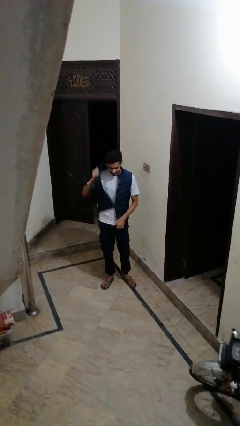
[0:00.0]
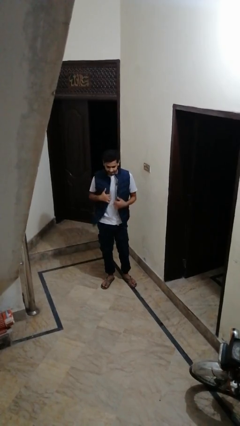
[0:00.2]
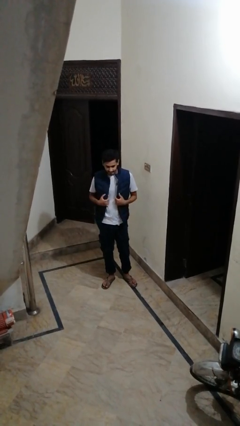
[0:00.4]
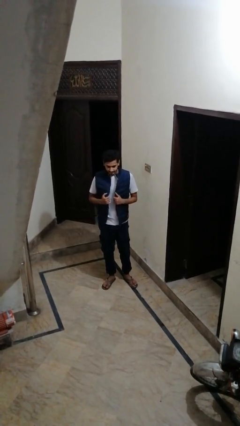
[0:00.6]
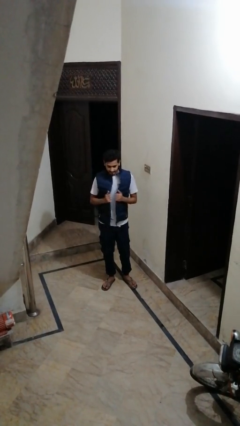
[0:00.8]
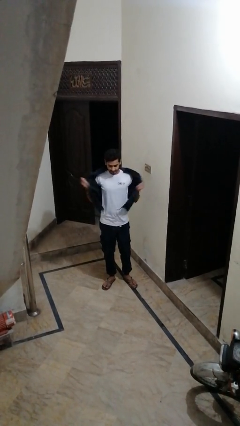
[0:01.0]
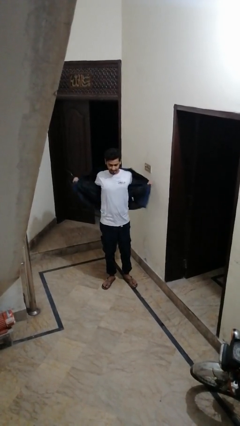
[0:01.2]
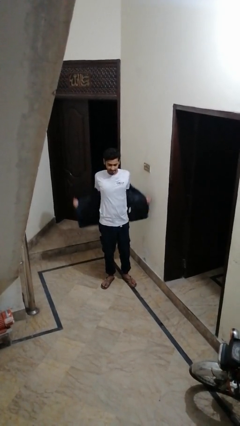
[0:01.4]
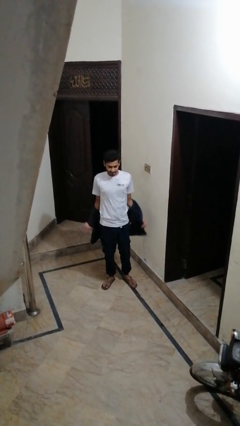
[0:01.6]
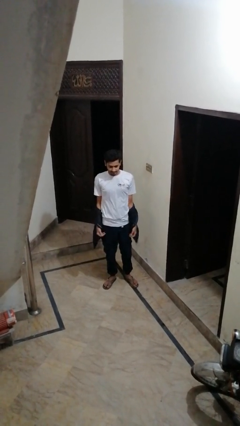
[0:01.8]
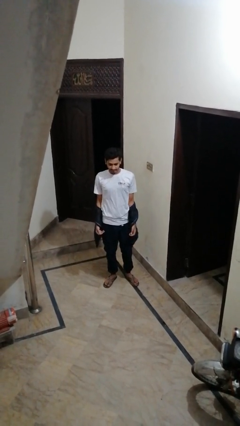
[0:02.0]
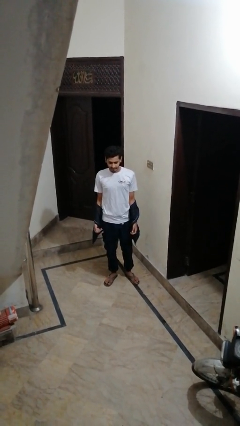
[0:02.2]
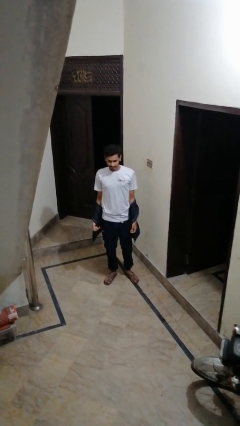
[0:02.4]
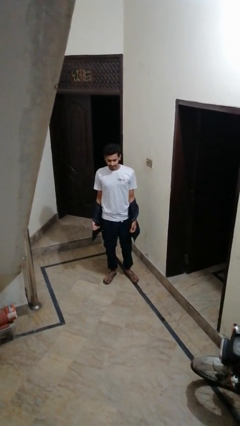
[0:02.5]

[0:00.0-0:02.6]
person takes off jacket

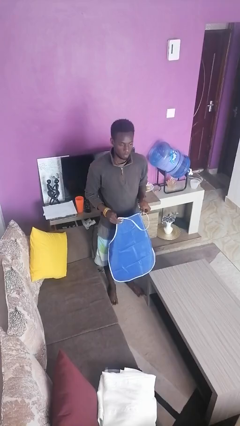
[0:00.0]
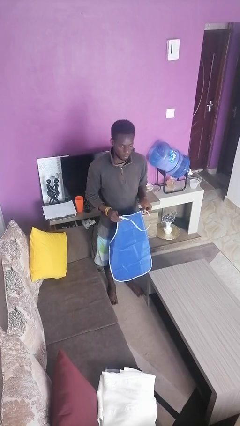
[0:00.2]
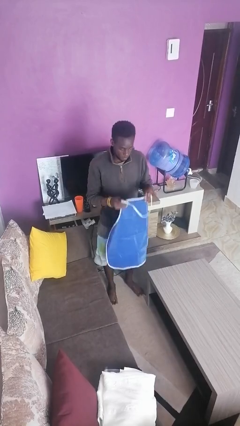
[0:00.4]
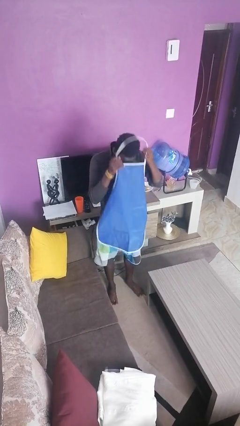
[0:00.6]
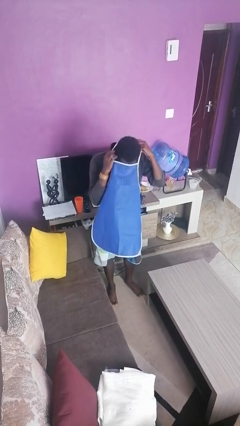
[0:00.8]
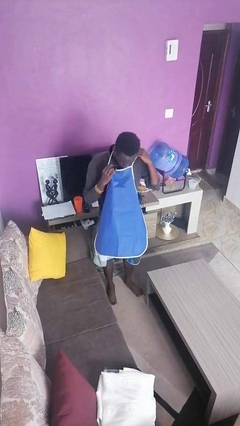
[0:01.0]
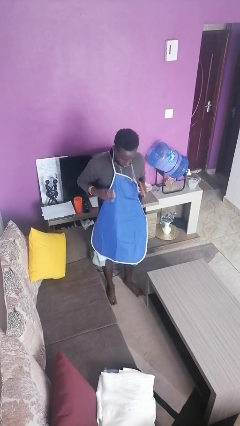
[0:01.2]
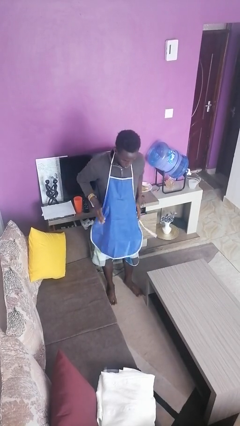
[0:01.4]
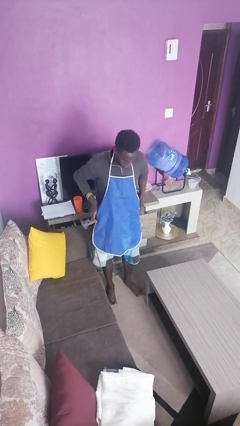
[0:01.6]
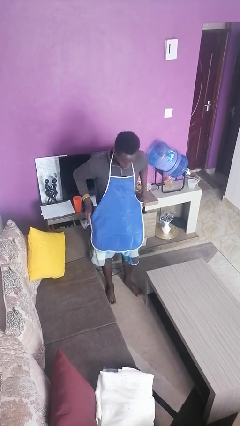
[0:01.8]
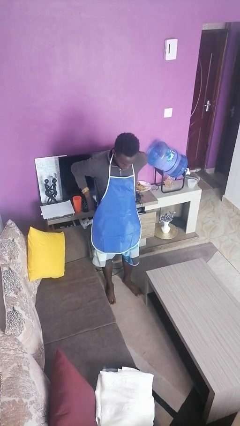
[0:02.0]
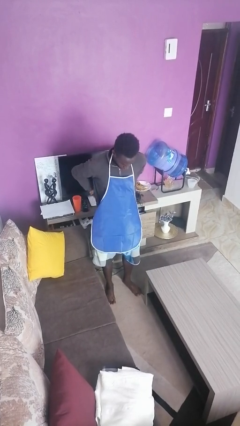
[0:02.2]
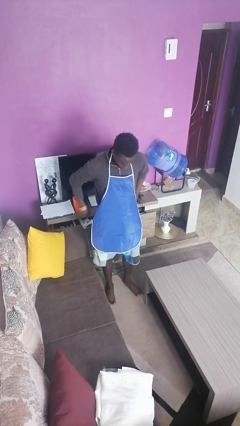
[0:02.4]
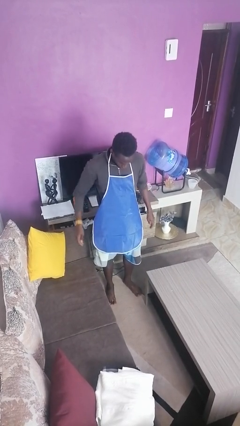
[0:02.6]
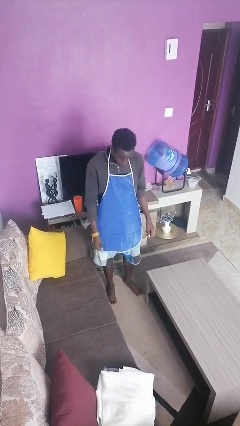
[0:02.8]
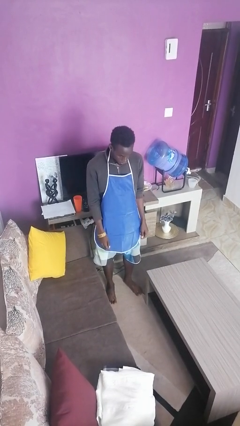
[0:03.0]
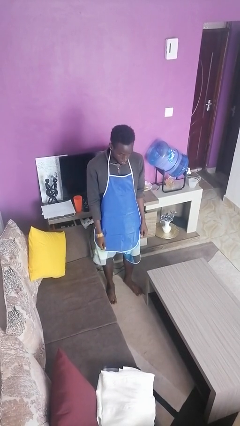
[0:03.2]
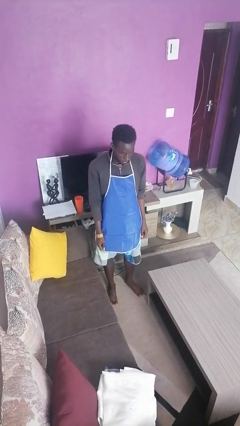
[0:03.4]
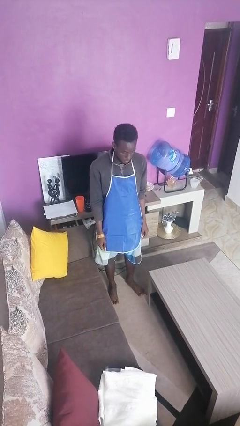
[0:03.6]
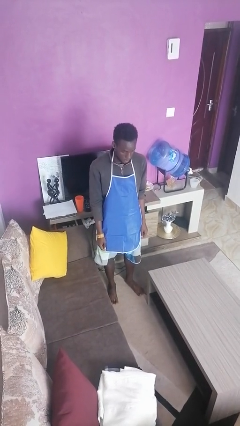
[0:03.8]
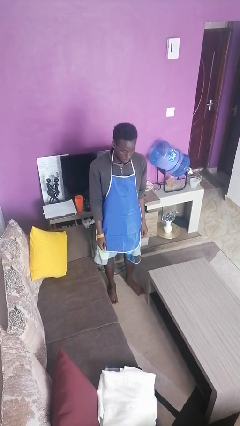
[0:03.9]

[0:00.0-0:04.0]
person puts on apron

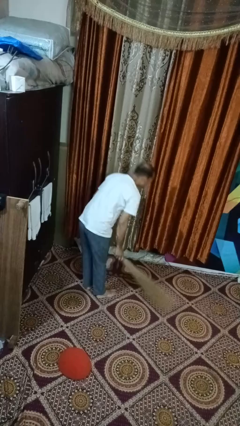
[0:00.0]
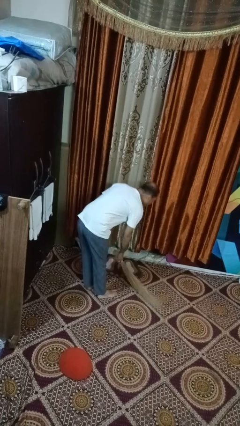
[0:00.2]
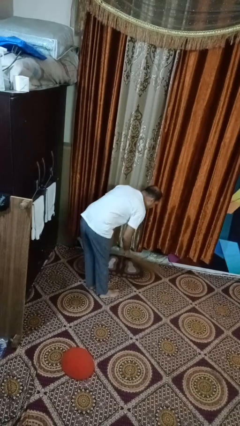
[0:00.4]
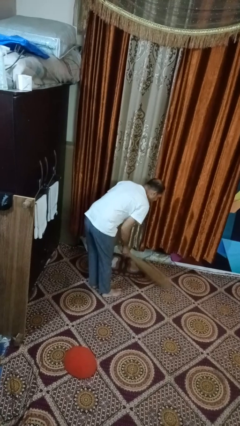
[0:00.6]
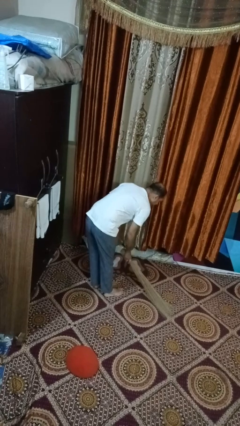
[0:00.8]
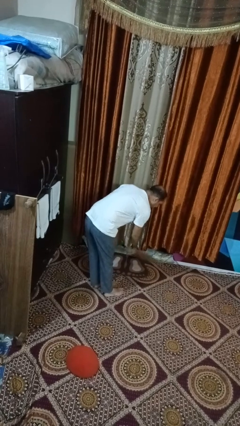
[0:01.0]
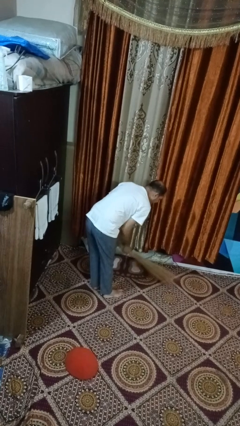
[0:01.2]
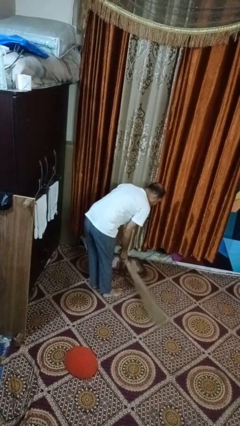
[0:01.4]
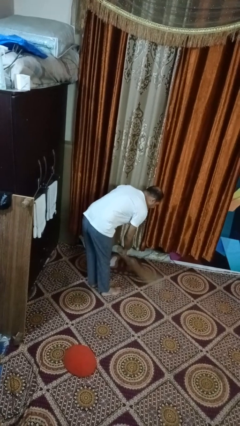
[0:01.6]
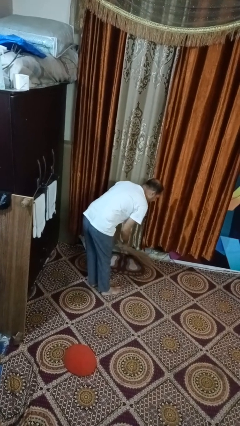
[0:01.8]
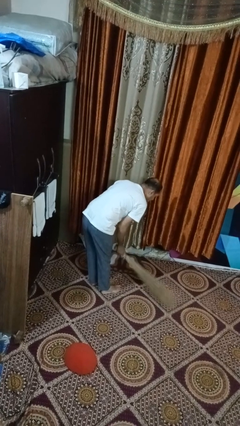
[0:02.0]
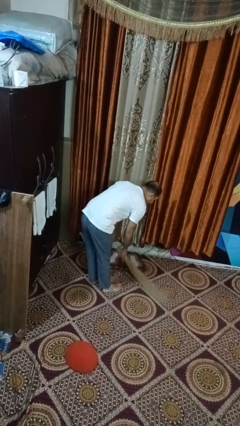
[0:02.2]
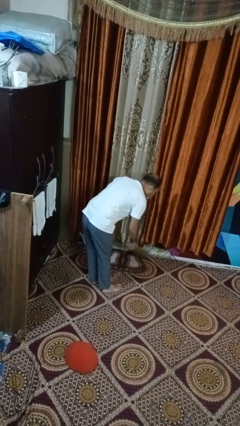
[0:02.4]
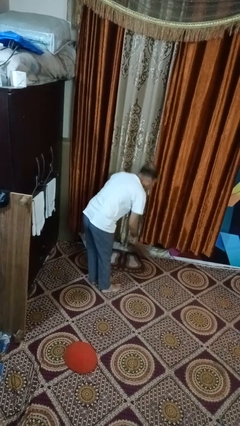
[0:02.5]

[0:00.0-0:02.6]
person sweeps floor

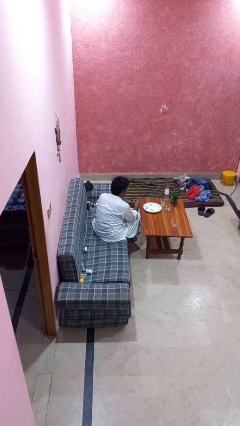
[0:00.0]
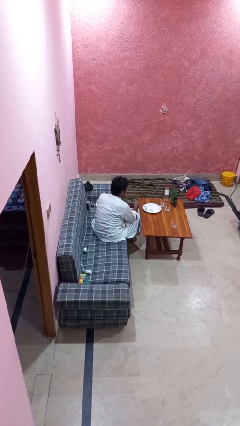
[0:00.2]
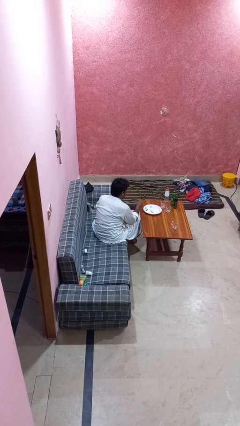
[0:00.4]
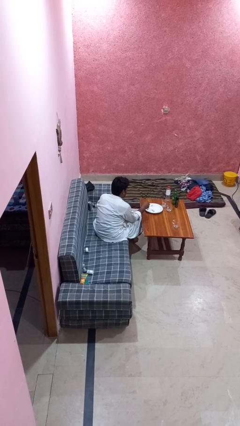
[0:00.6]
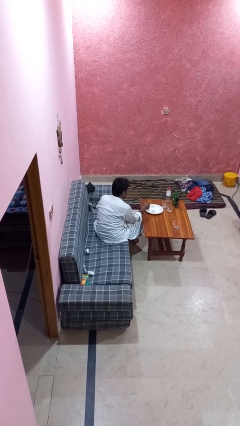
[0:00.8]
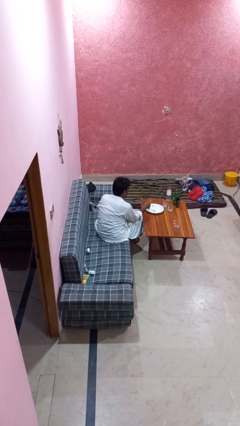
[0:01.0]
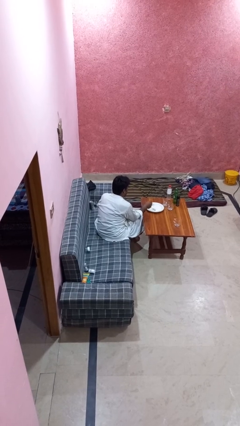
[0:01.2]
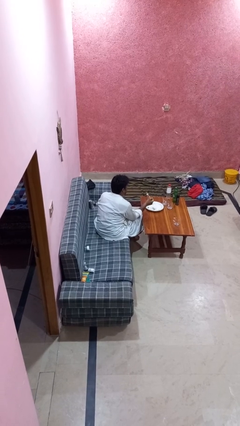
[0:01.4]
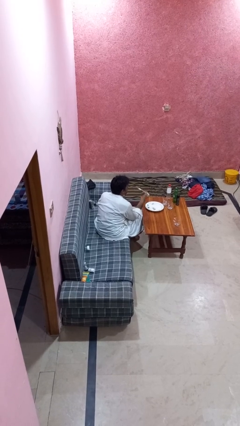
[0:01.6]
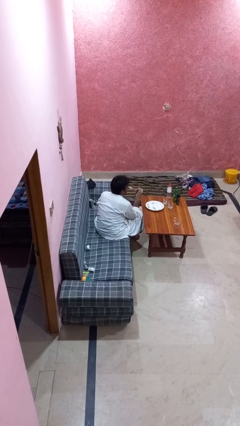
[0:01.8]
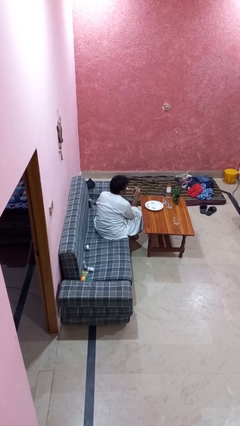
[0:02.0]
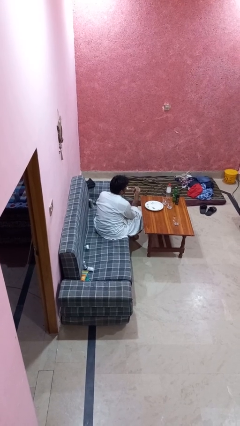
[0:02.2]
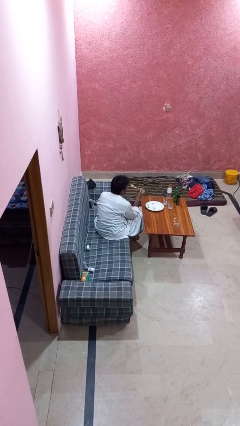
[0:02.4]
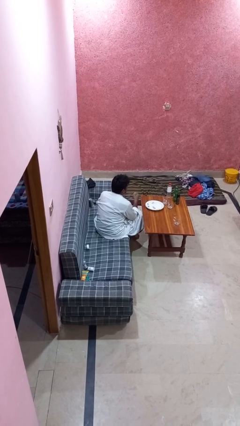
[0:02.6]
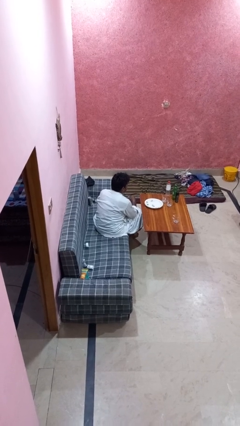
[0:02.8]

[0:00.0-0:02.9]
person eats with utensil

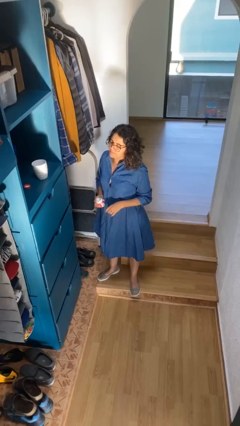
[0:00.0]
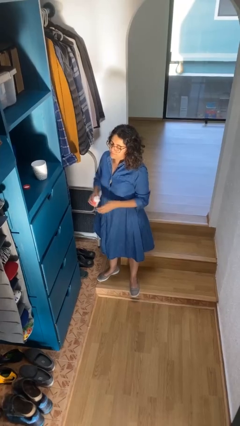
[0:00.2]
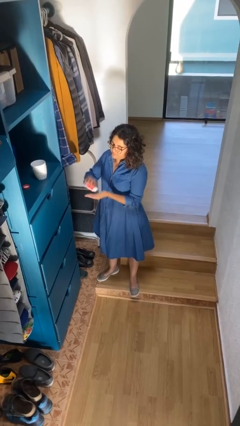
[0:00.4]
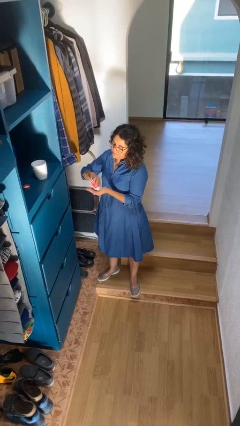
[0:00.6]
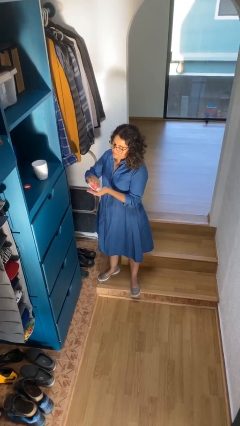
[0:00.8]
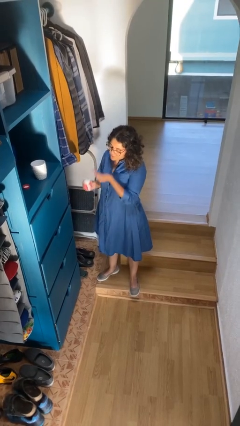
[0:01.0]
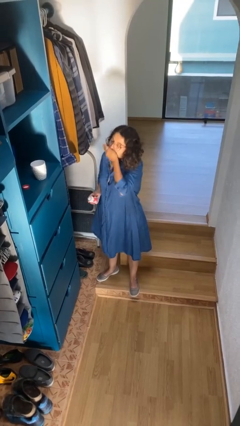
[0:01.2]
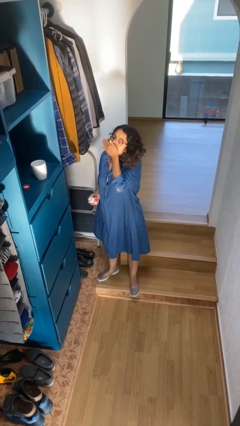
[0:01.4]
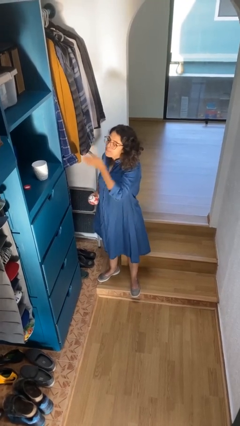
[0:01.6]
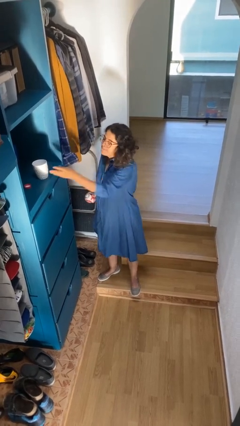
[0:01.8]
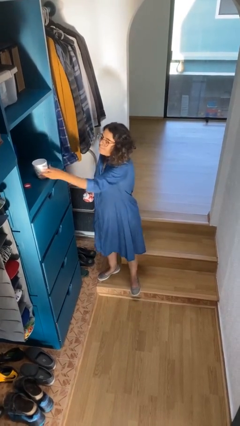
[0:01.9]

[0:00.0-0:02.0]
person takes medicine pills

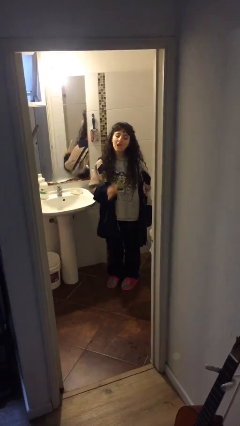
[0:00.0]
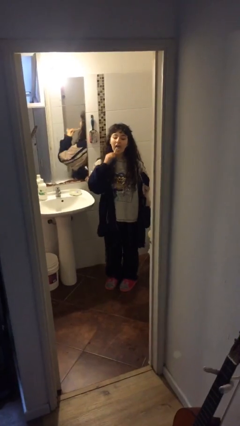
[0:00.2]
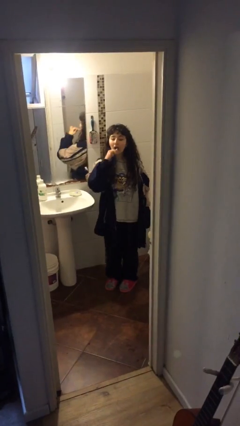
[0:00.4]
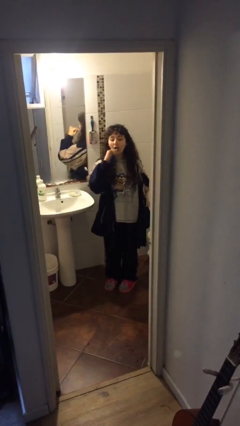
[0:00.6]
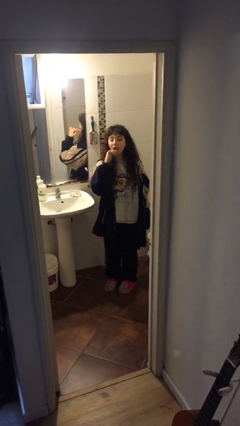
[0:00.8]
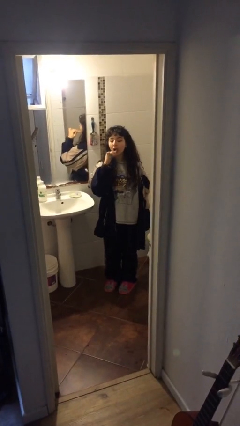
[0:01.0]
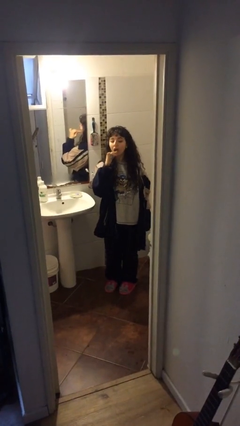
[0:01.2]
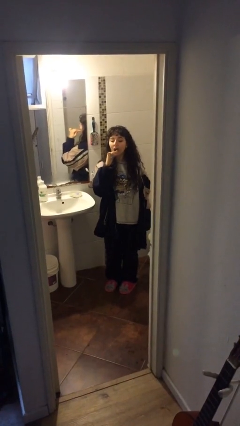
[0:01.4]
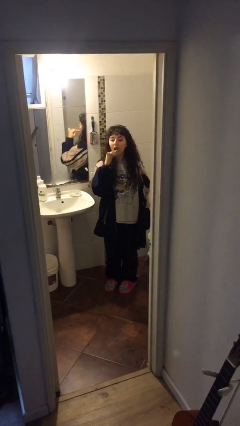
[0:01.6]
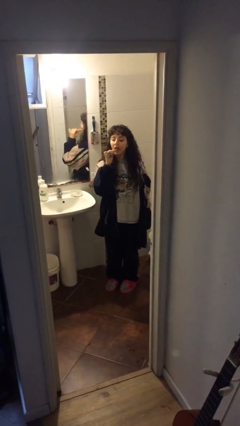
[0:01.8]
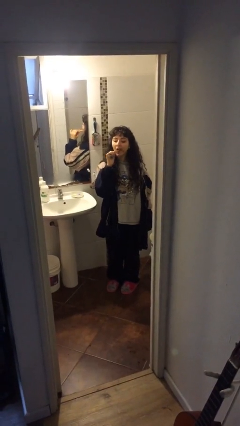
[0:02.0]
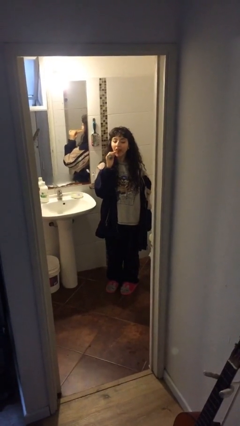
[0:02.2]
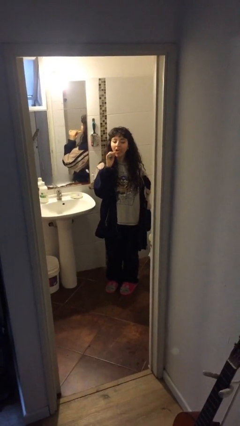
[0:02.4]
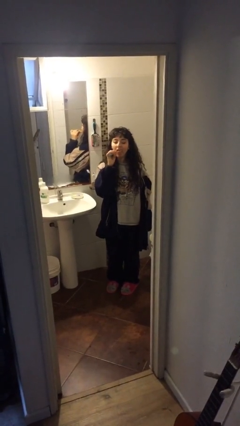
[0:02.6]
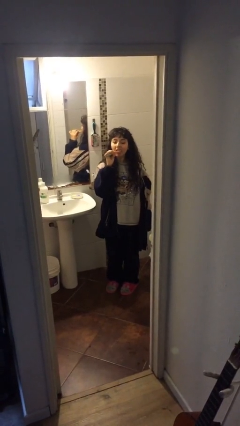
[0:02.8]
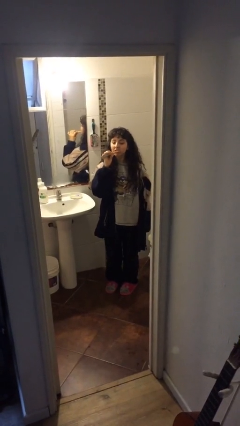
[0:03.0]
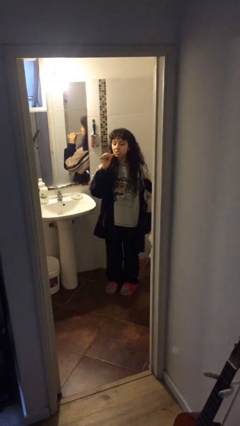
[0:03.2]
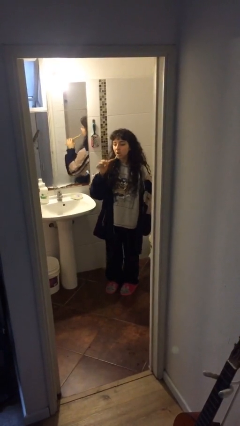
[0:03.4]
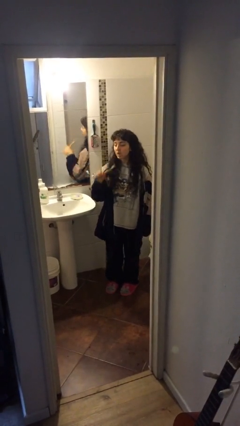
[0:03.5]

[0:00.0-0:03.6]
person brushes teeth
